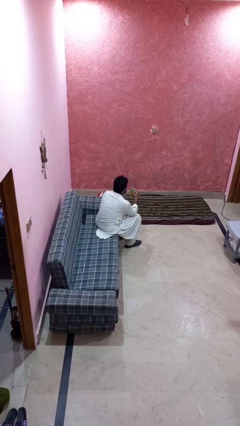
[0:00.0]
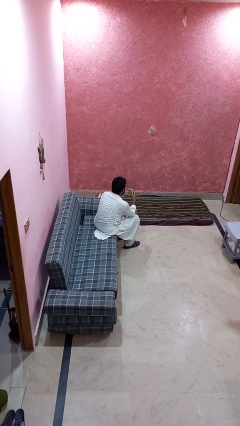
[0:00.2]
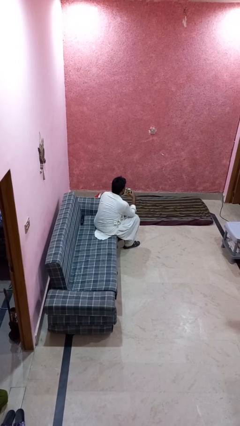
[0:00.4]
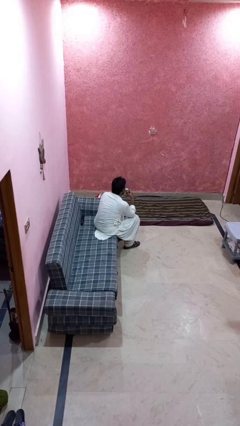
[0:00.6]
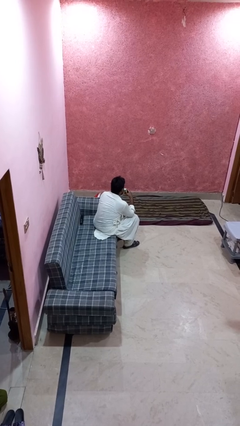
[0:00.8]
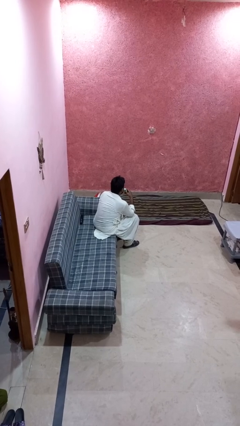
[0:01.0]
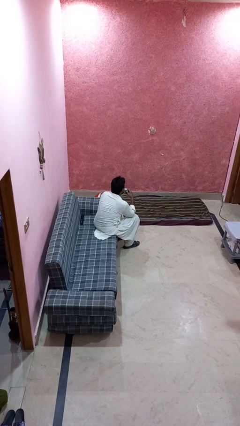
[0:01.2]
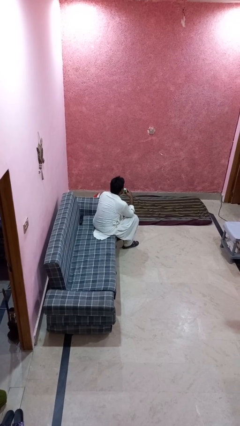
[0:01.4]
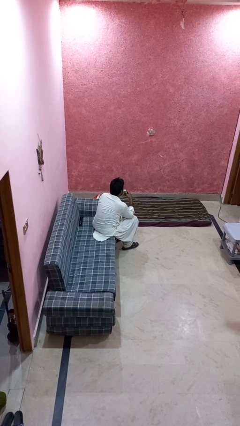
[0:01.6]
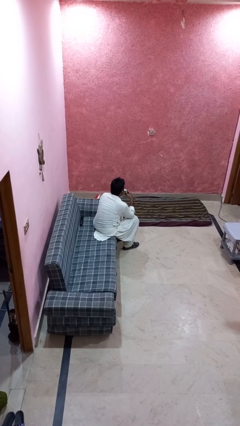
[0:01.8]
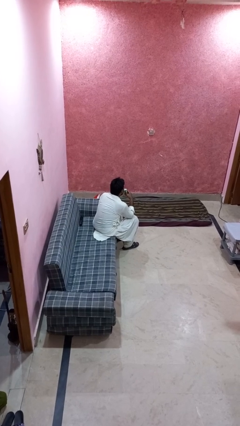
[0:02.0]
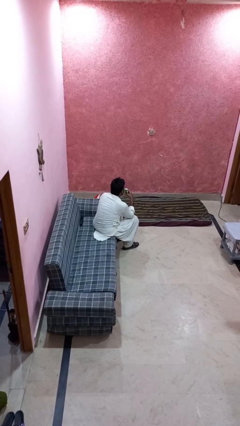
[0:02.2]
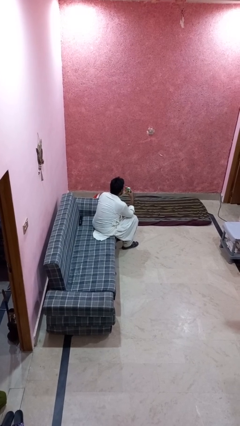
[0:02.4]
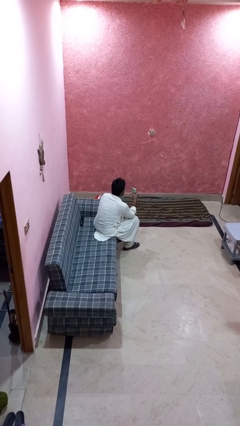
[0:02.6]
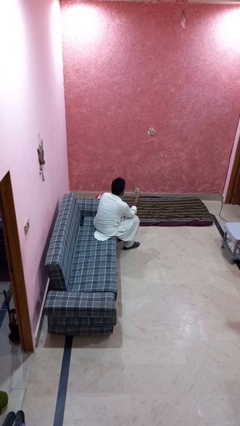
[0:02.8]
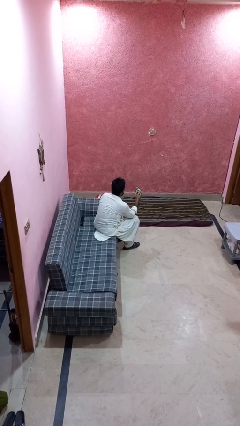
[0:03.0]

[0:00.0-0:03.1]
person drinks from straw

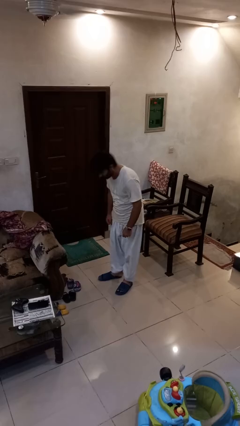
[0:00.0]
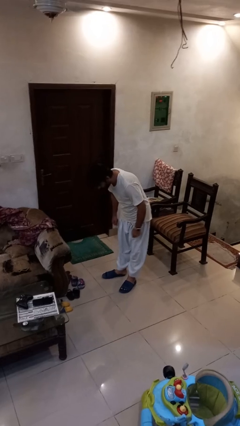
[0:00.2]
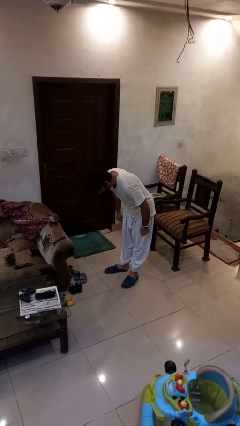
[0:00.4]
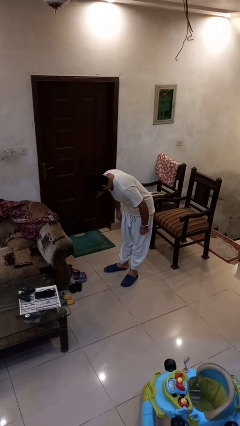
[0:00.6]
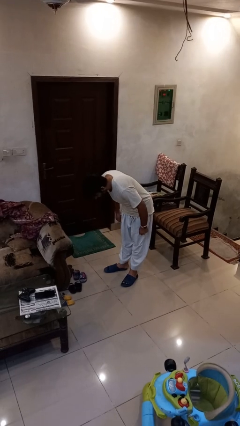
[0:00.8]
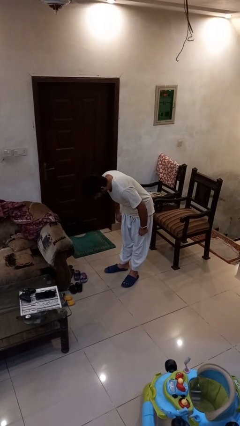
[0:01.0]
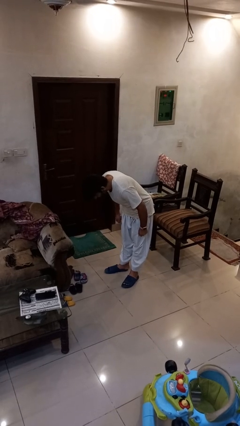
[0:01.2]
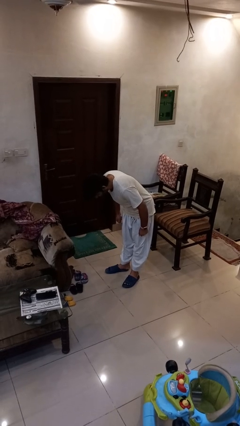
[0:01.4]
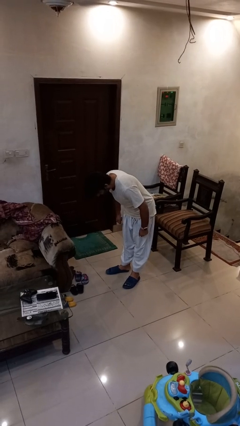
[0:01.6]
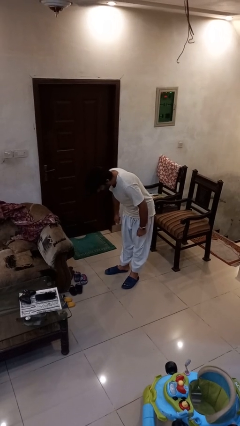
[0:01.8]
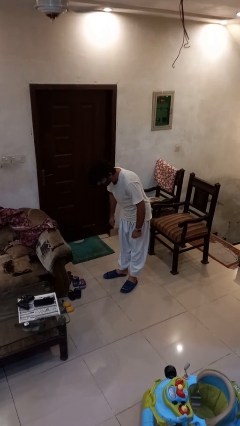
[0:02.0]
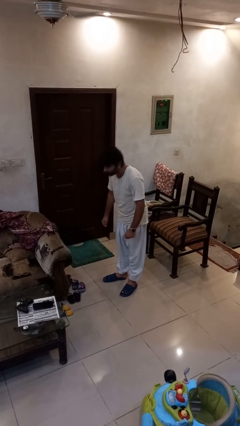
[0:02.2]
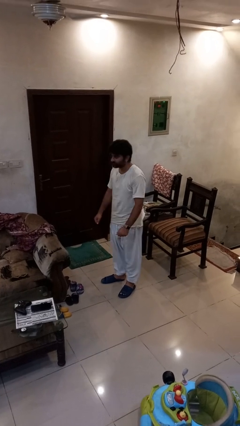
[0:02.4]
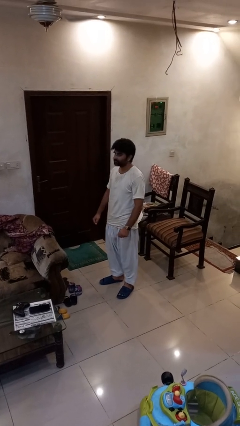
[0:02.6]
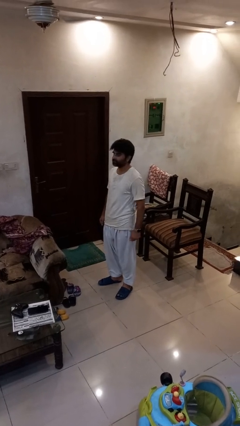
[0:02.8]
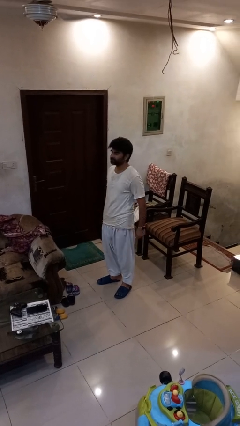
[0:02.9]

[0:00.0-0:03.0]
person bows

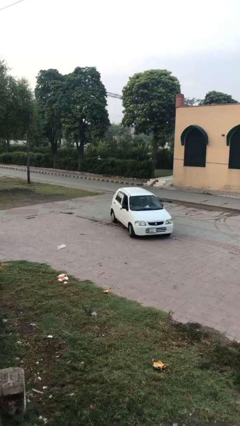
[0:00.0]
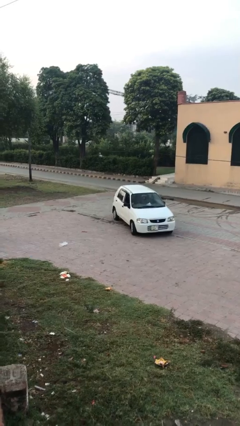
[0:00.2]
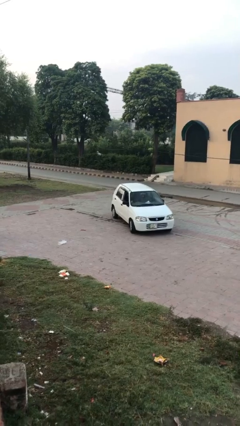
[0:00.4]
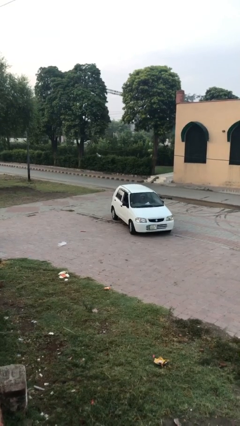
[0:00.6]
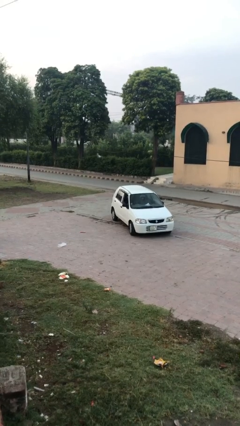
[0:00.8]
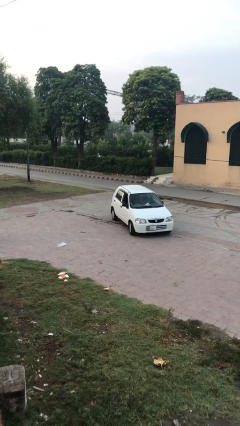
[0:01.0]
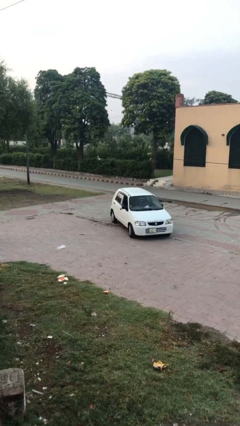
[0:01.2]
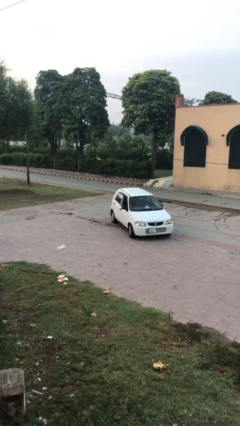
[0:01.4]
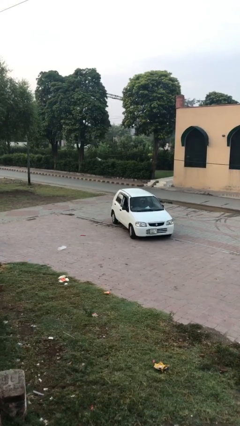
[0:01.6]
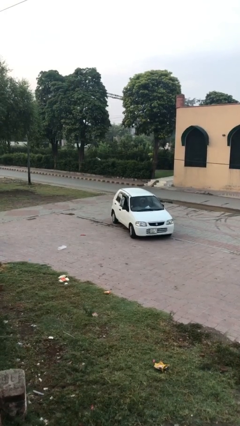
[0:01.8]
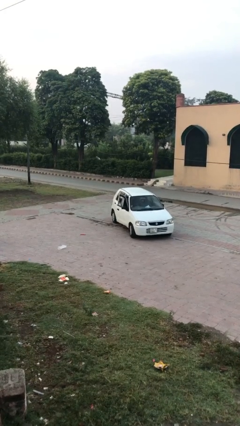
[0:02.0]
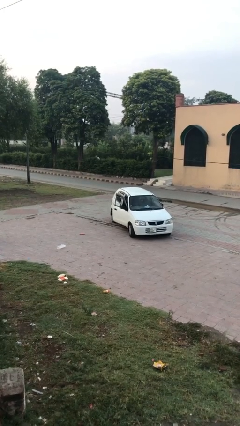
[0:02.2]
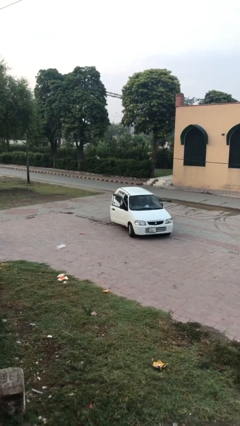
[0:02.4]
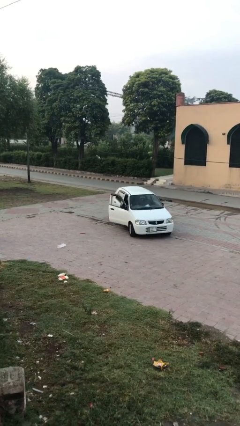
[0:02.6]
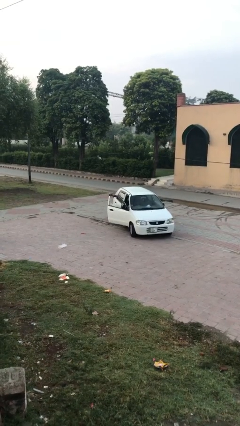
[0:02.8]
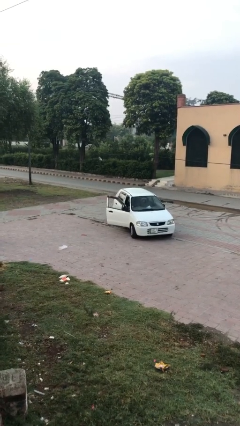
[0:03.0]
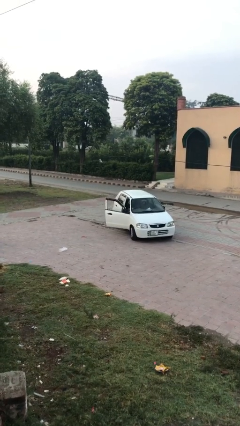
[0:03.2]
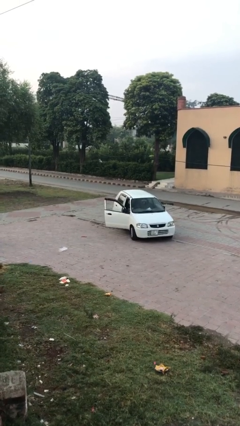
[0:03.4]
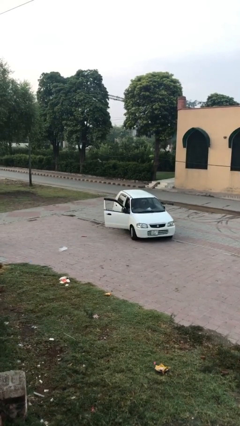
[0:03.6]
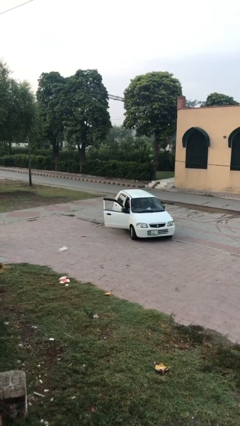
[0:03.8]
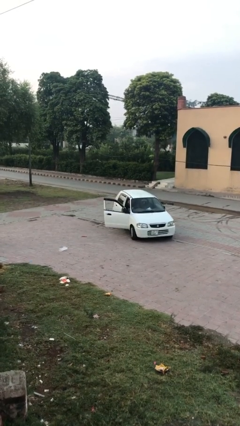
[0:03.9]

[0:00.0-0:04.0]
person opens car door

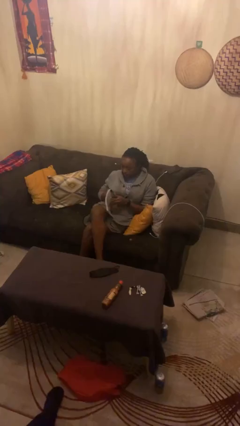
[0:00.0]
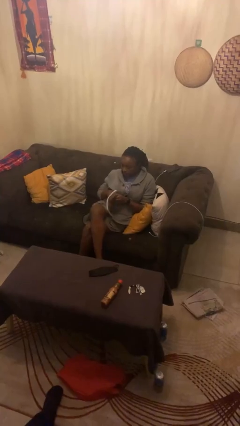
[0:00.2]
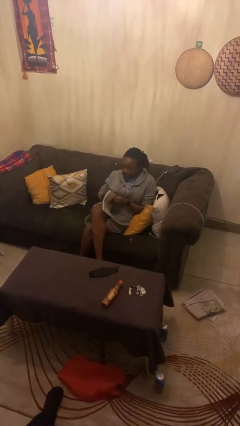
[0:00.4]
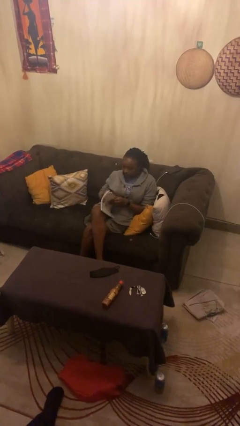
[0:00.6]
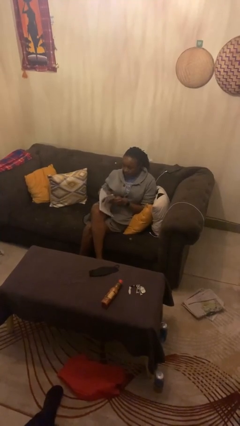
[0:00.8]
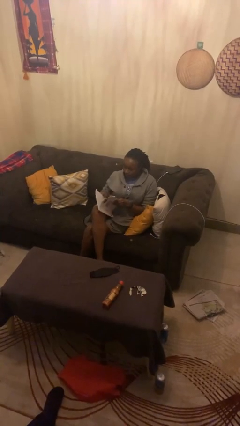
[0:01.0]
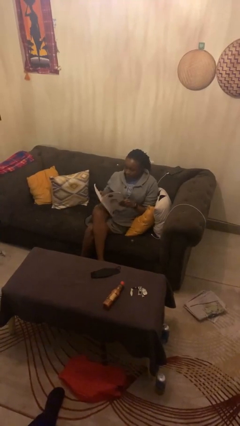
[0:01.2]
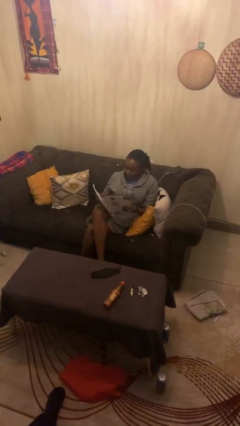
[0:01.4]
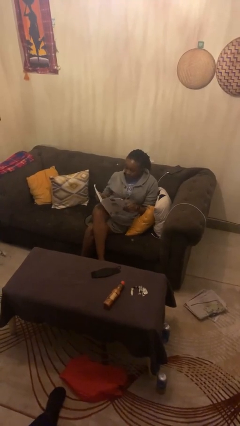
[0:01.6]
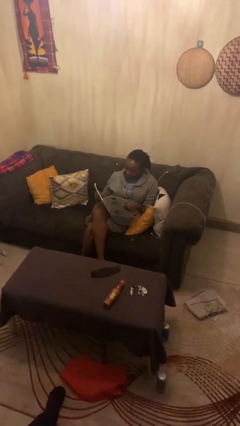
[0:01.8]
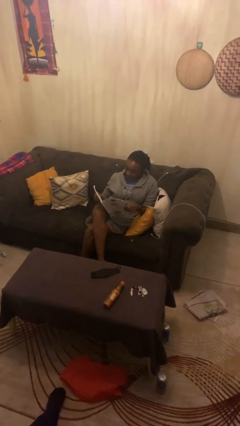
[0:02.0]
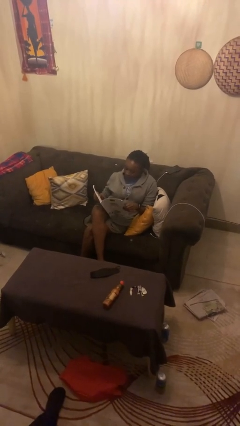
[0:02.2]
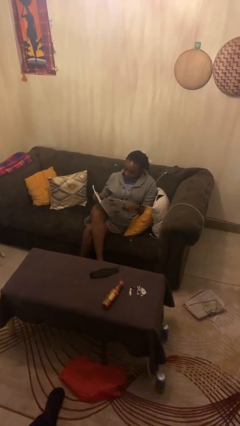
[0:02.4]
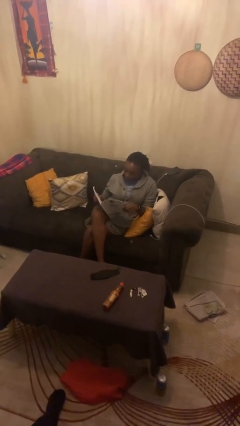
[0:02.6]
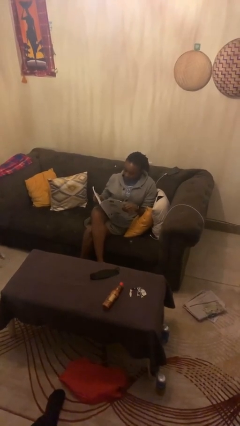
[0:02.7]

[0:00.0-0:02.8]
person reads magazine

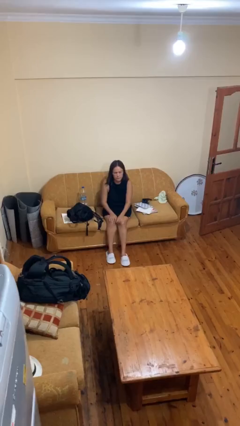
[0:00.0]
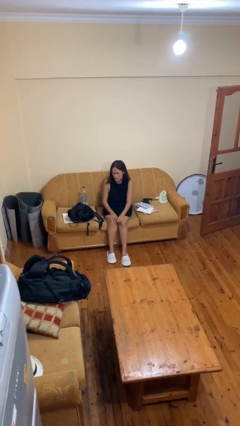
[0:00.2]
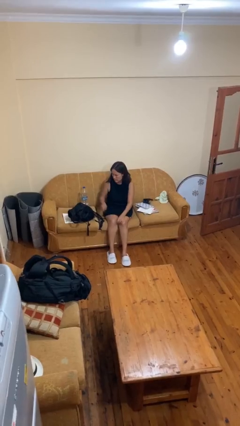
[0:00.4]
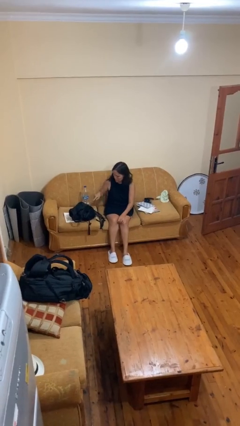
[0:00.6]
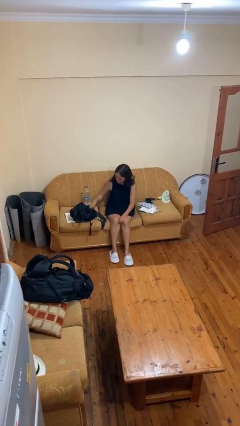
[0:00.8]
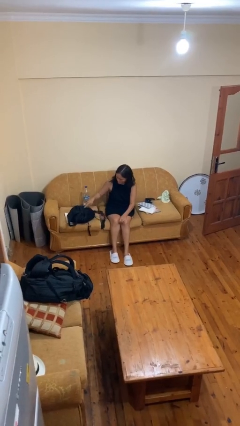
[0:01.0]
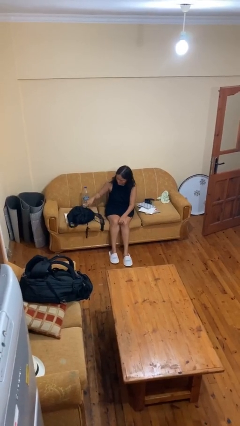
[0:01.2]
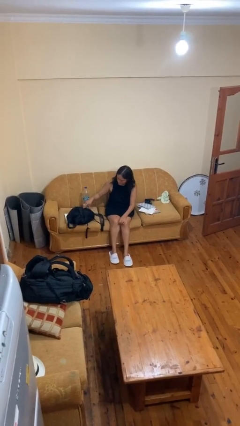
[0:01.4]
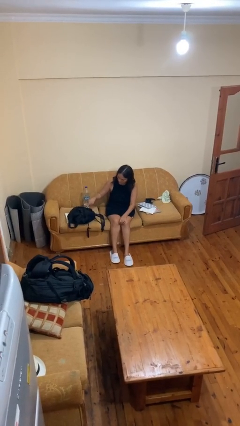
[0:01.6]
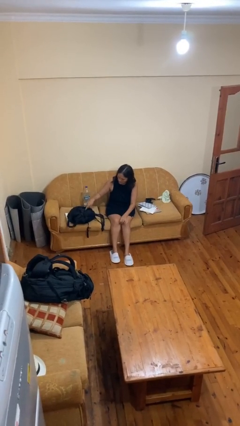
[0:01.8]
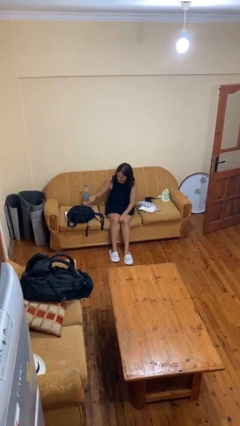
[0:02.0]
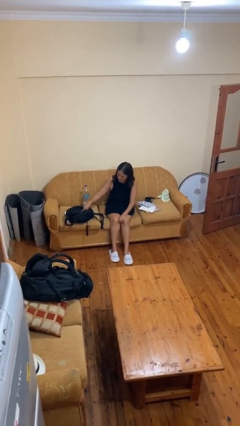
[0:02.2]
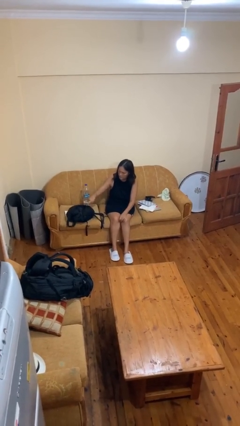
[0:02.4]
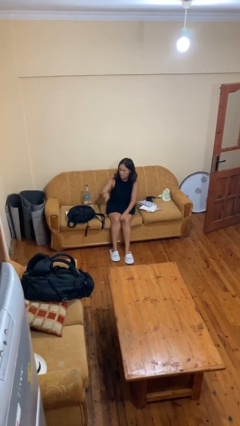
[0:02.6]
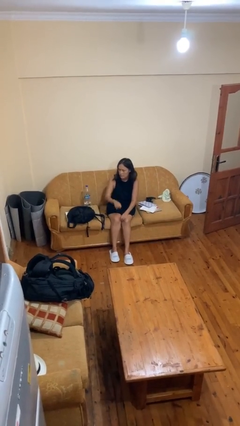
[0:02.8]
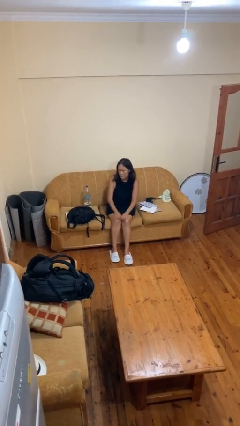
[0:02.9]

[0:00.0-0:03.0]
person taps object with finger

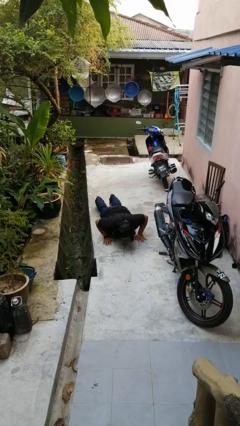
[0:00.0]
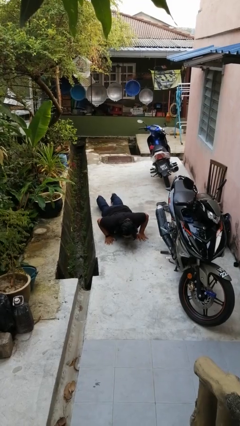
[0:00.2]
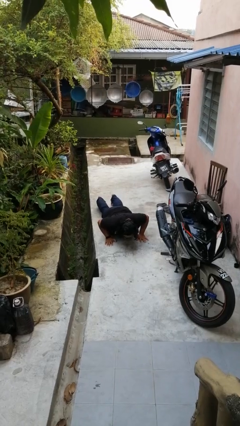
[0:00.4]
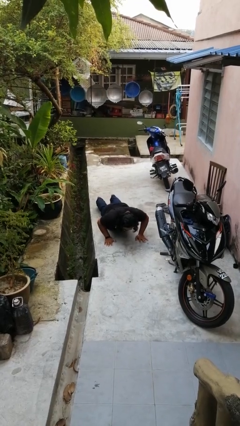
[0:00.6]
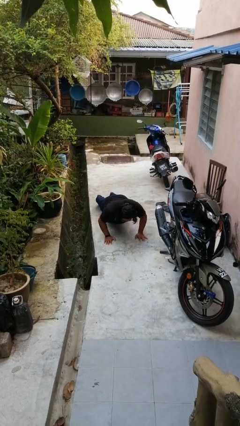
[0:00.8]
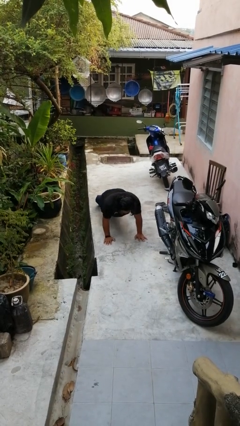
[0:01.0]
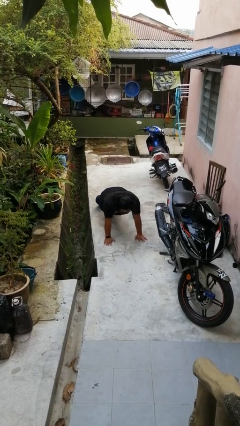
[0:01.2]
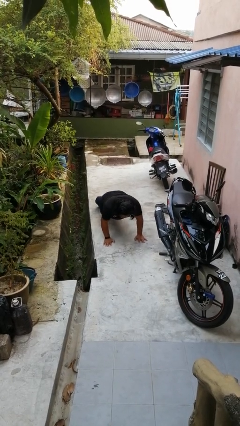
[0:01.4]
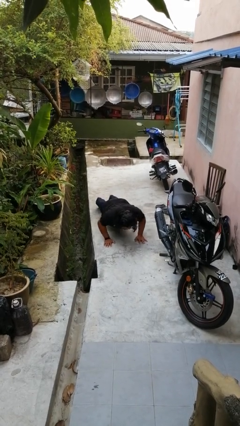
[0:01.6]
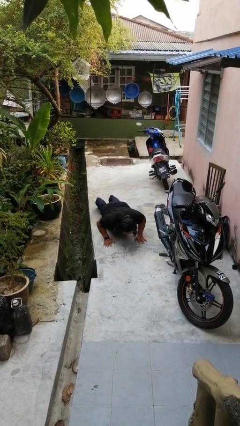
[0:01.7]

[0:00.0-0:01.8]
person exercises with pushup
